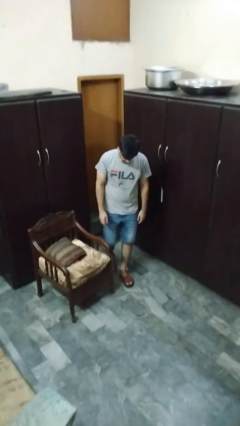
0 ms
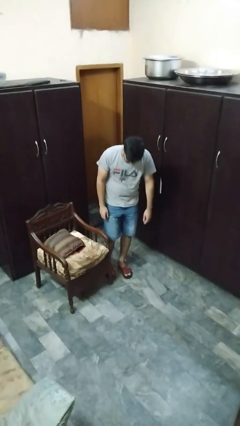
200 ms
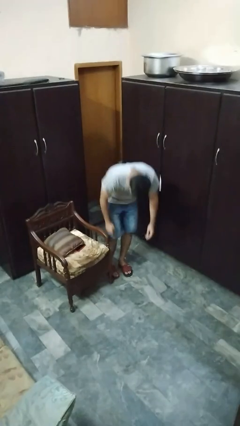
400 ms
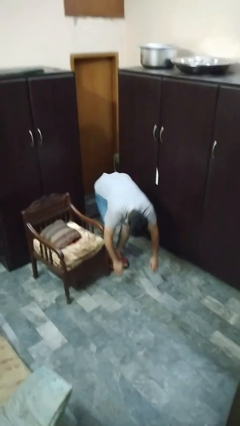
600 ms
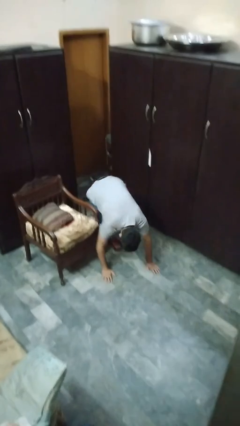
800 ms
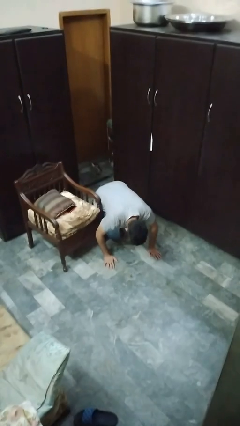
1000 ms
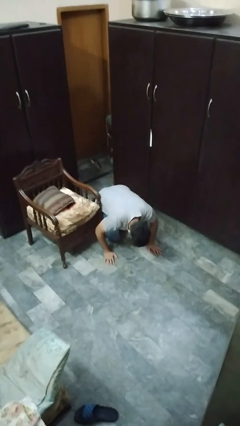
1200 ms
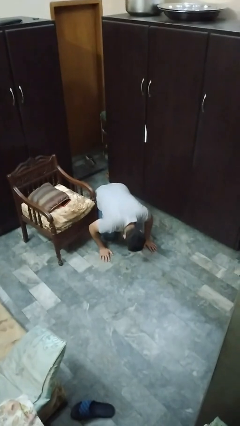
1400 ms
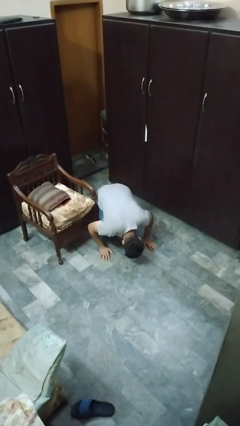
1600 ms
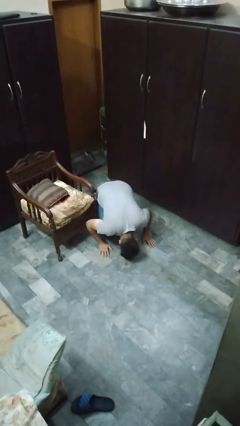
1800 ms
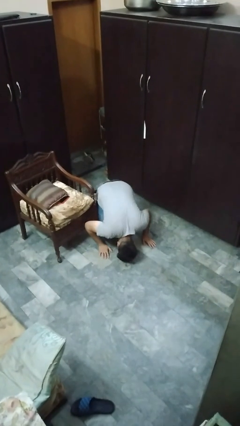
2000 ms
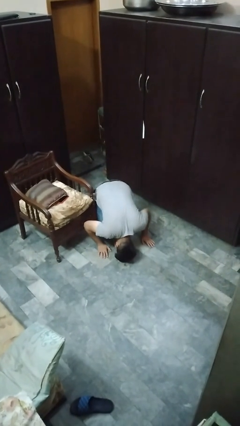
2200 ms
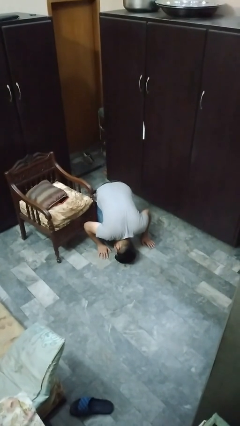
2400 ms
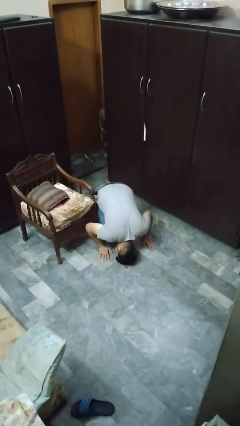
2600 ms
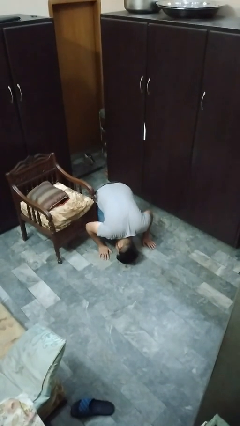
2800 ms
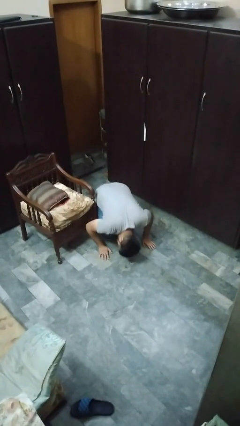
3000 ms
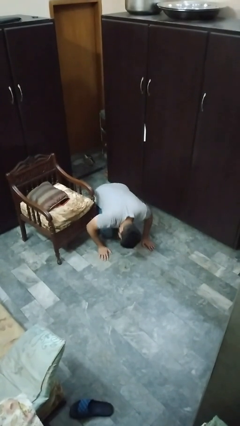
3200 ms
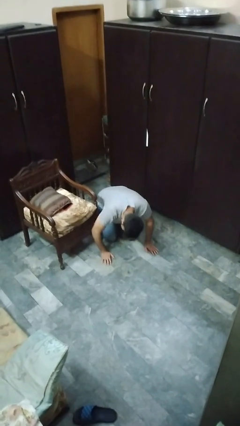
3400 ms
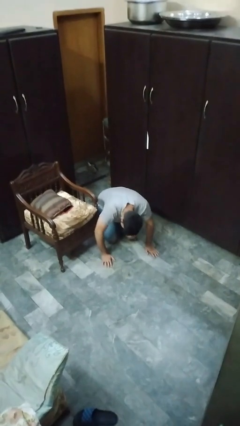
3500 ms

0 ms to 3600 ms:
person trips on object on floor

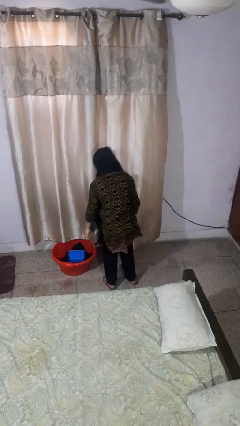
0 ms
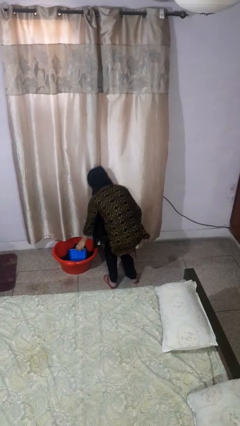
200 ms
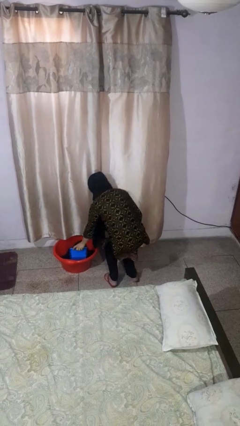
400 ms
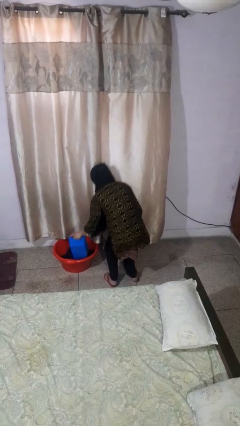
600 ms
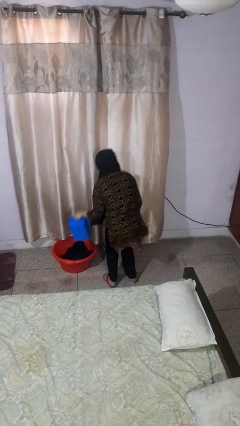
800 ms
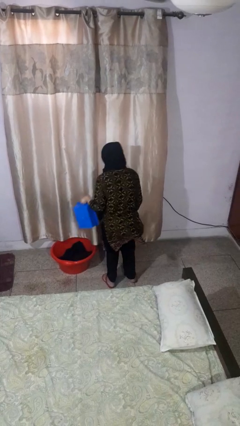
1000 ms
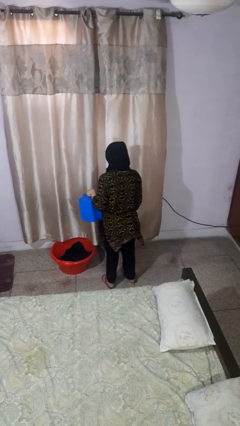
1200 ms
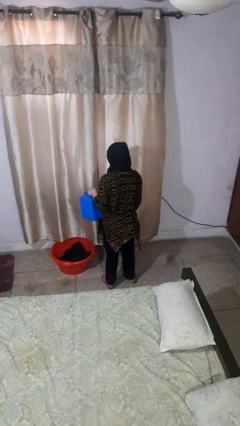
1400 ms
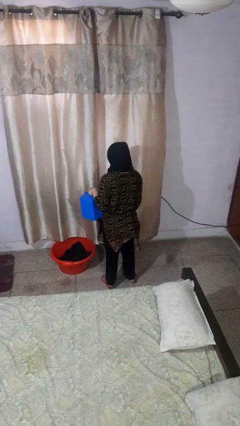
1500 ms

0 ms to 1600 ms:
person takes object from basket

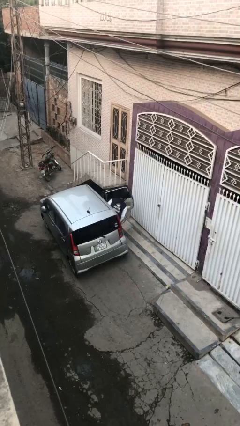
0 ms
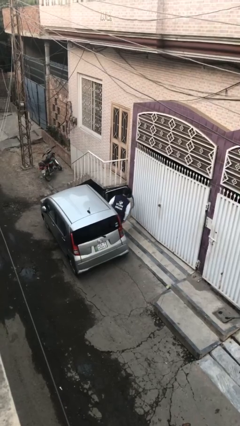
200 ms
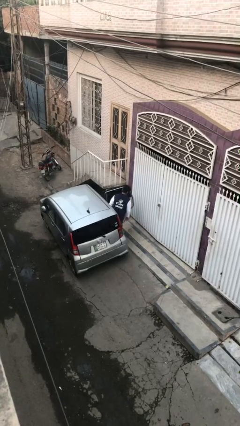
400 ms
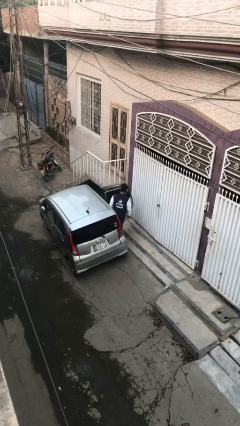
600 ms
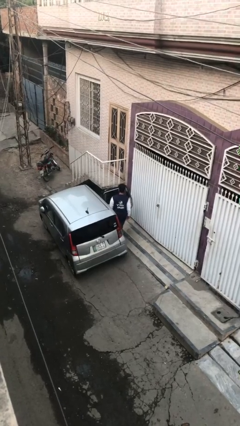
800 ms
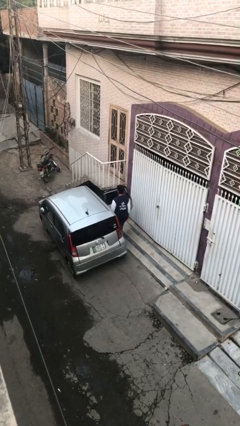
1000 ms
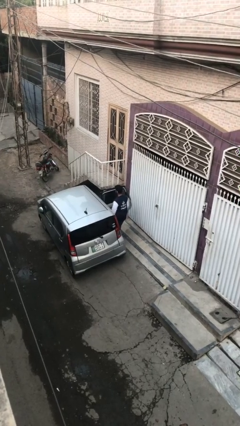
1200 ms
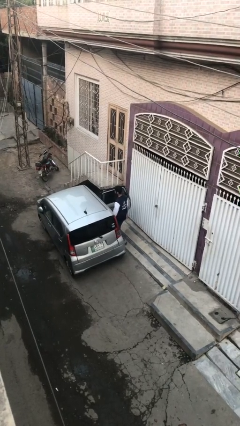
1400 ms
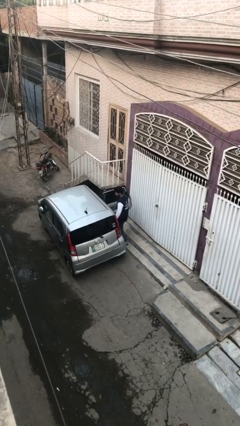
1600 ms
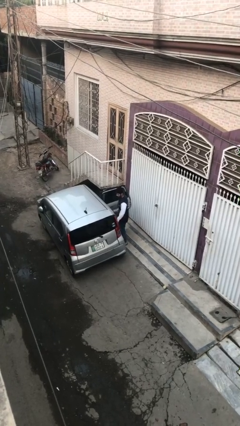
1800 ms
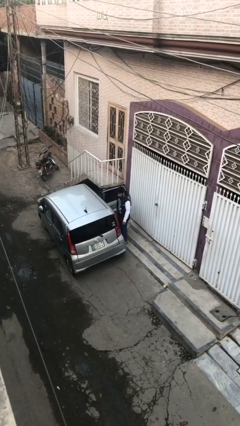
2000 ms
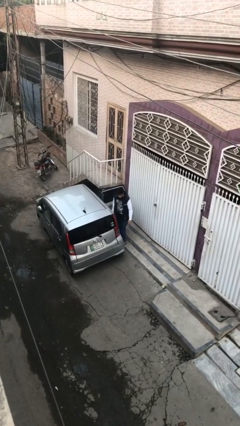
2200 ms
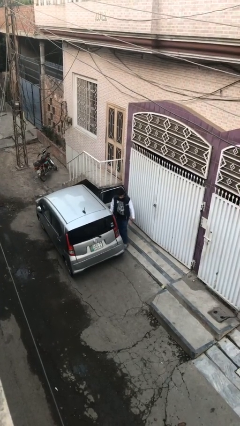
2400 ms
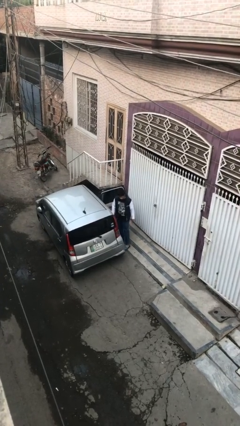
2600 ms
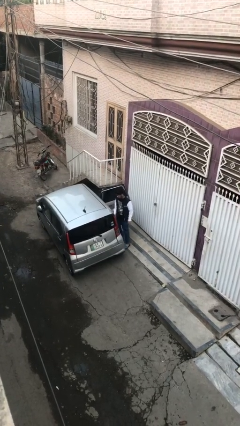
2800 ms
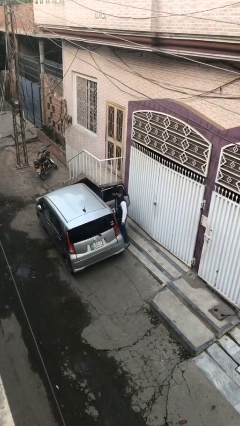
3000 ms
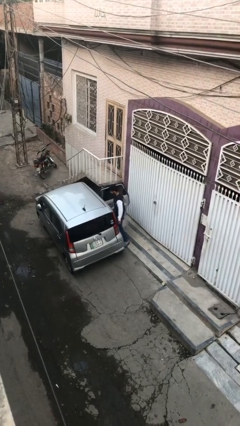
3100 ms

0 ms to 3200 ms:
person exits car

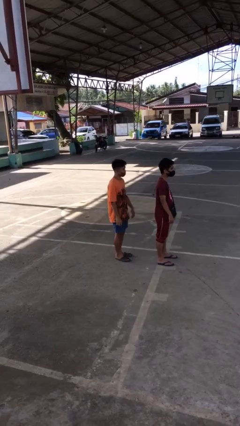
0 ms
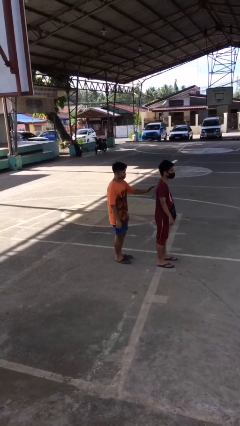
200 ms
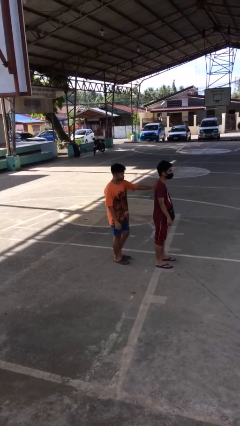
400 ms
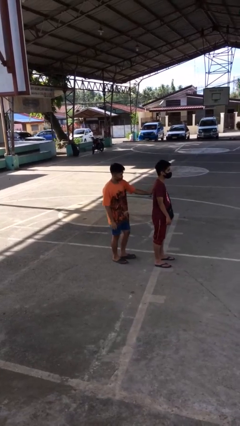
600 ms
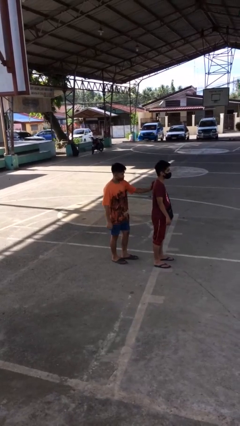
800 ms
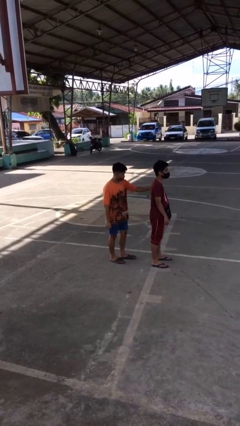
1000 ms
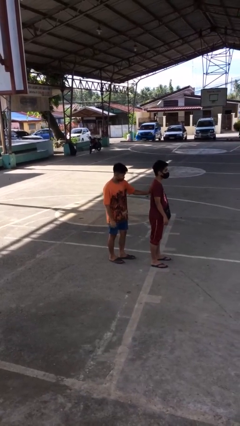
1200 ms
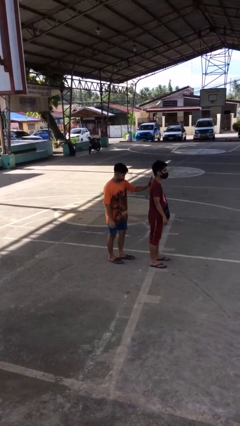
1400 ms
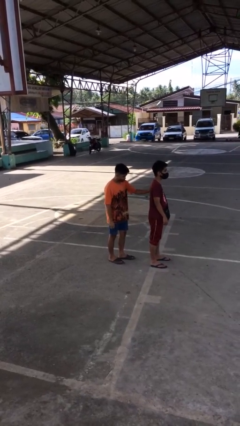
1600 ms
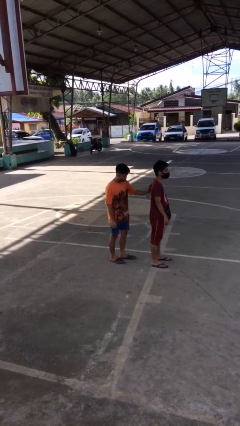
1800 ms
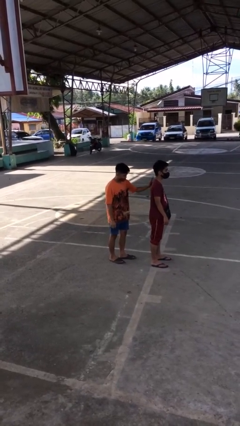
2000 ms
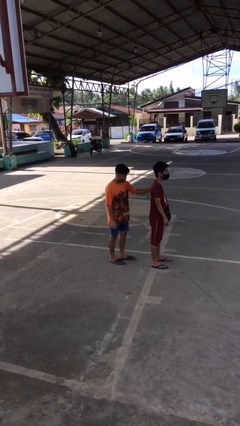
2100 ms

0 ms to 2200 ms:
person touches back of person

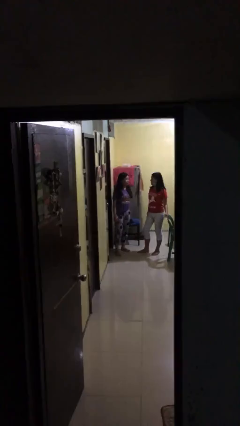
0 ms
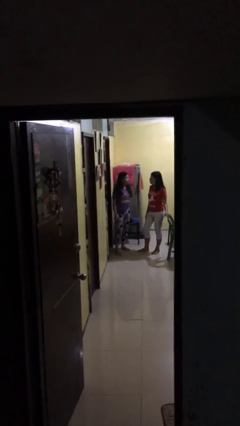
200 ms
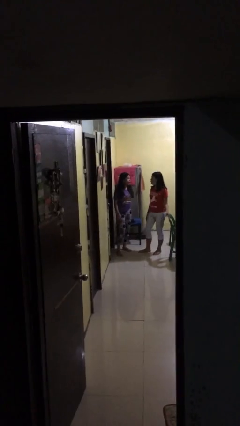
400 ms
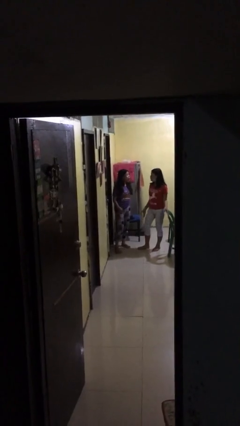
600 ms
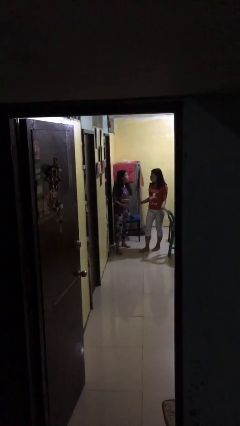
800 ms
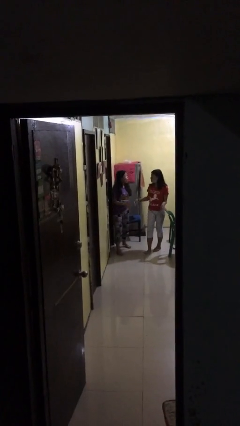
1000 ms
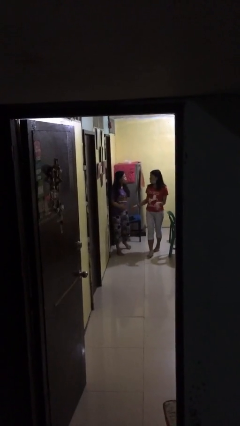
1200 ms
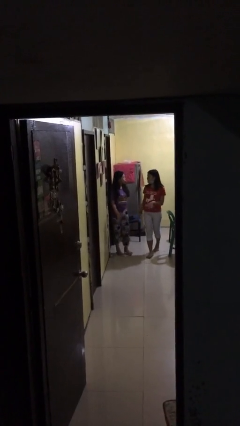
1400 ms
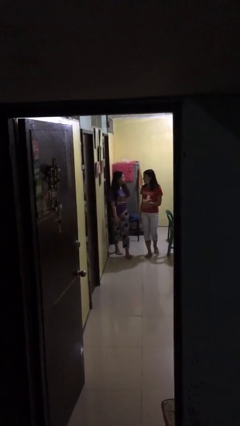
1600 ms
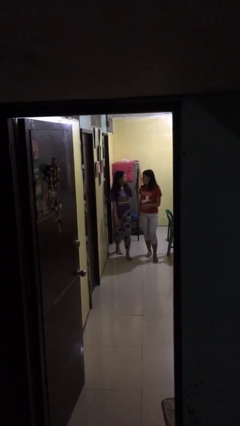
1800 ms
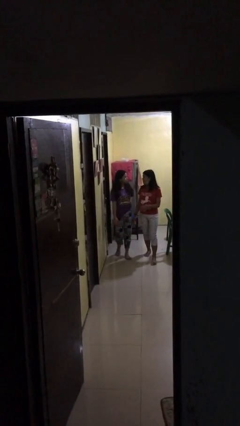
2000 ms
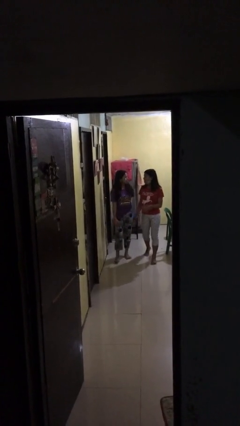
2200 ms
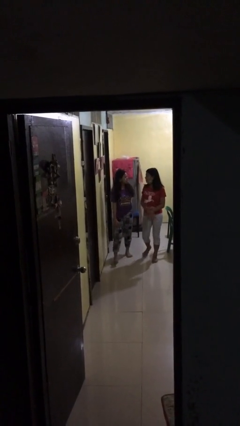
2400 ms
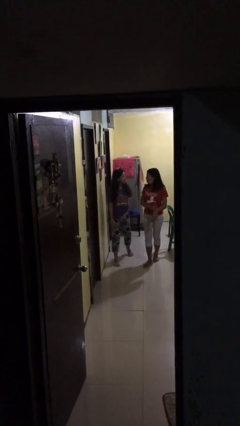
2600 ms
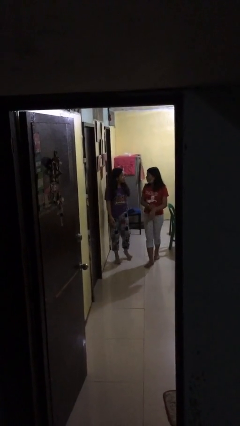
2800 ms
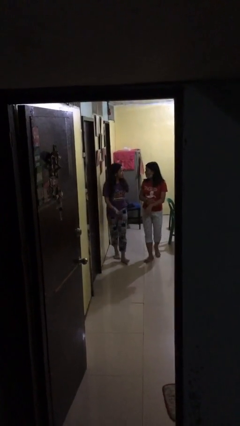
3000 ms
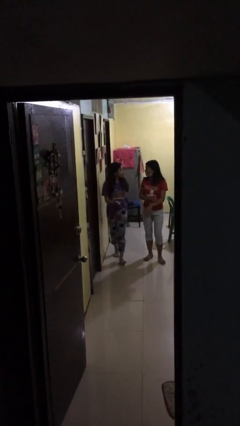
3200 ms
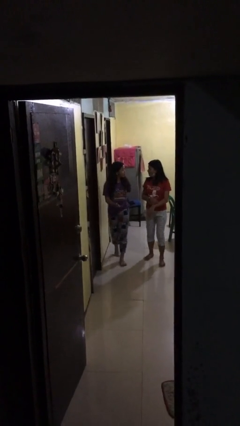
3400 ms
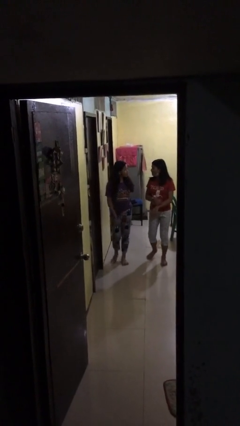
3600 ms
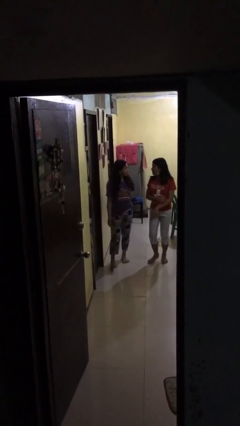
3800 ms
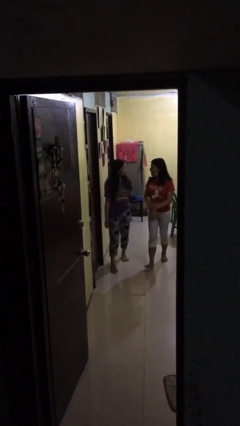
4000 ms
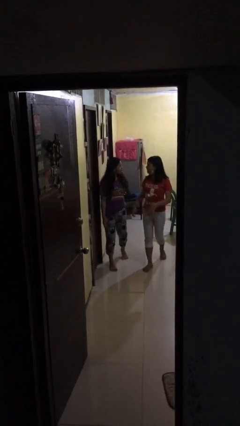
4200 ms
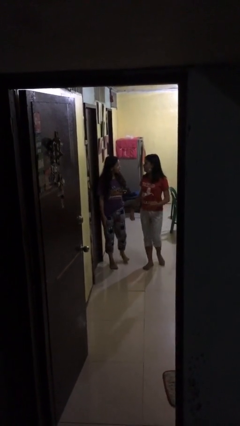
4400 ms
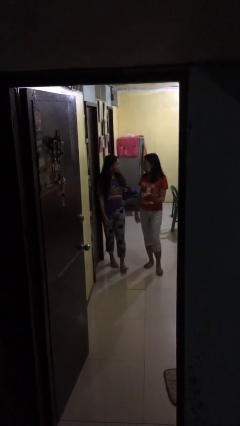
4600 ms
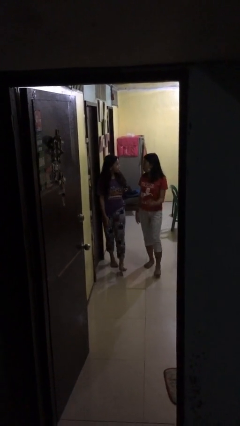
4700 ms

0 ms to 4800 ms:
person talks to person

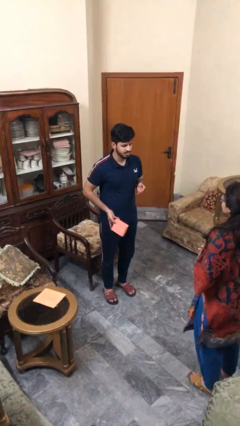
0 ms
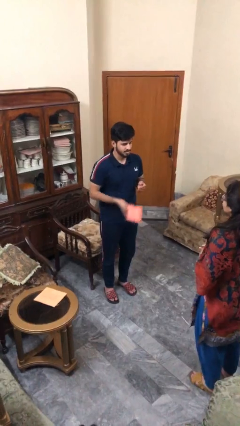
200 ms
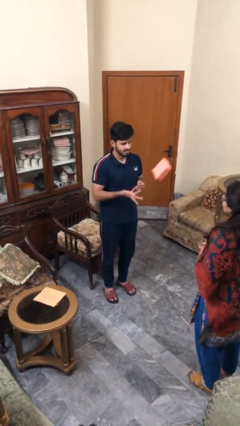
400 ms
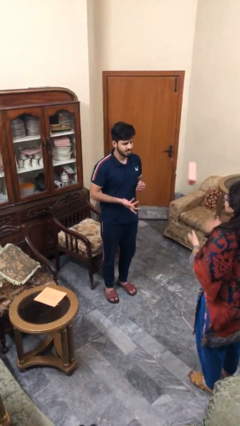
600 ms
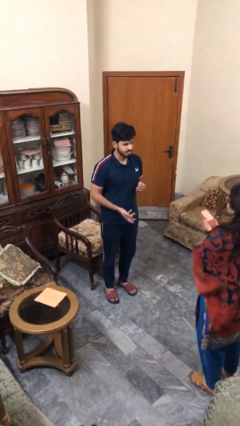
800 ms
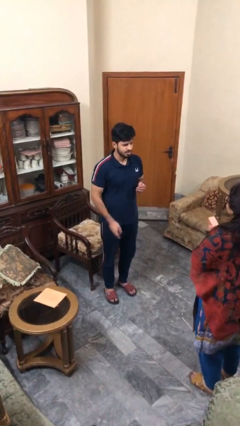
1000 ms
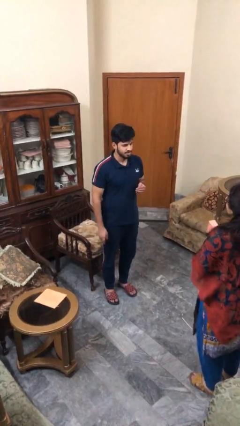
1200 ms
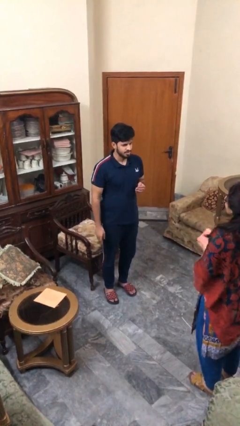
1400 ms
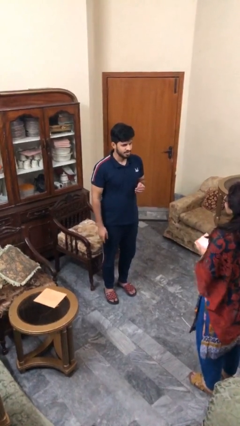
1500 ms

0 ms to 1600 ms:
person throws object to person

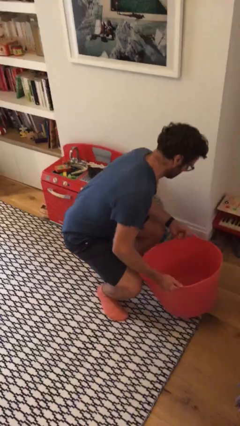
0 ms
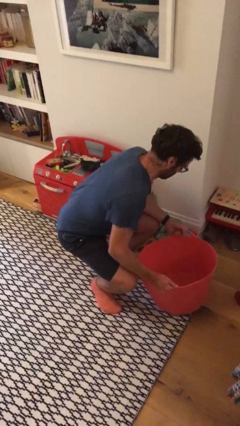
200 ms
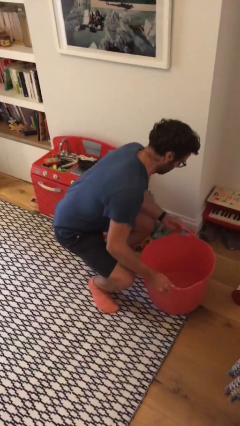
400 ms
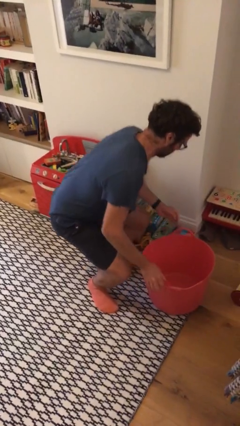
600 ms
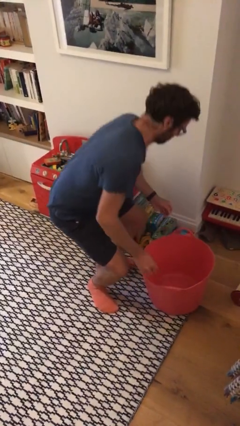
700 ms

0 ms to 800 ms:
person puts down object on floor
